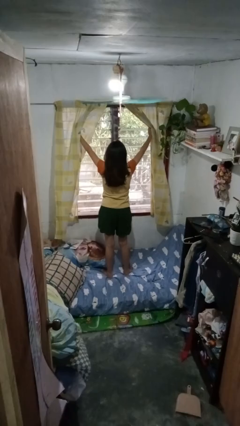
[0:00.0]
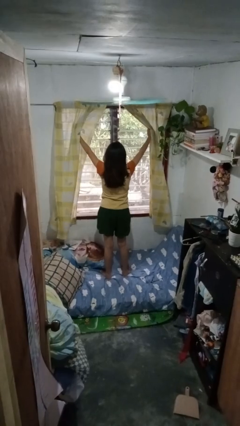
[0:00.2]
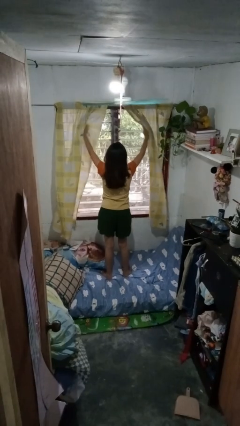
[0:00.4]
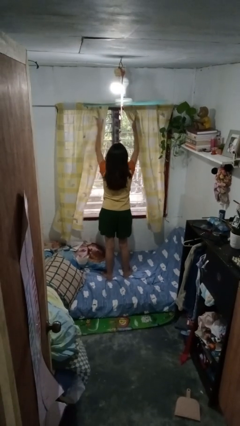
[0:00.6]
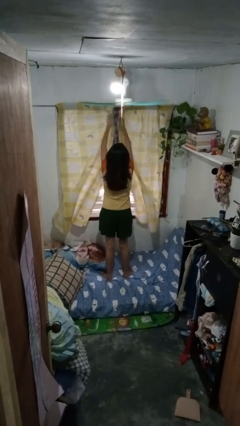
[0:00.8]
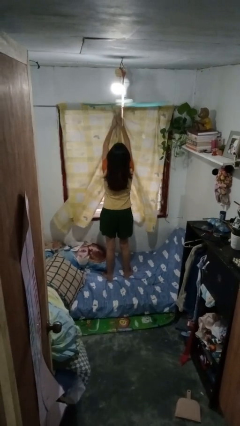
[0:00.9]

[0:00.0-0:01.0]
person closes curtains

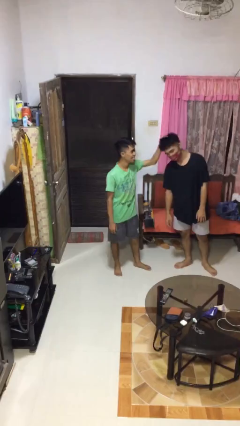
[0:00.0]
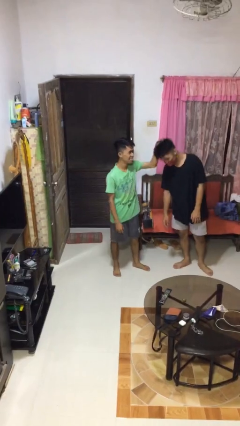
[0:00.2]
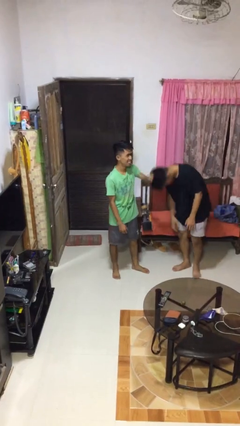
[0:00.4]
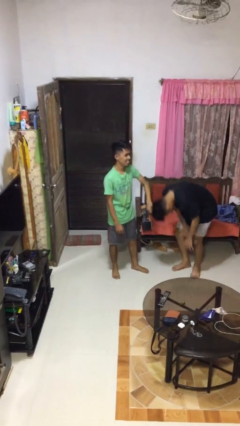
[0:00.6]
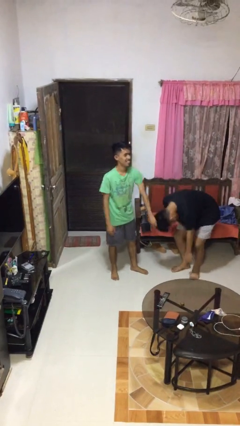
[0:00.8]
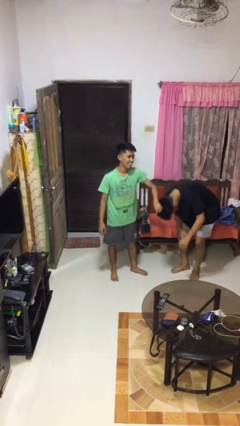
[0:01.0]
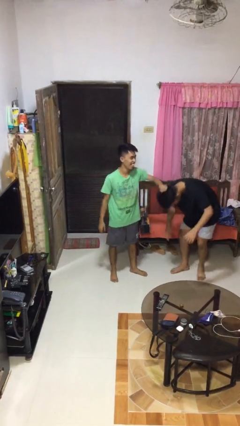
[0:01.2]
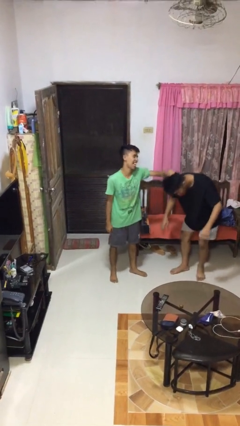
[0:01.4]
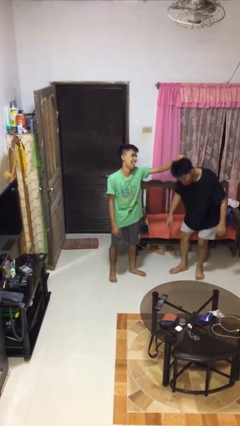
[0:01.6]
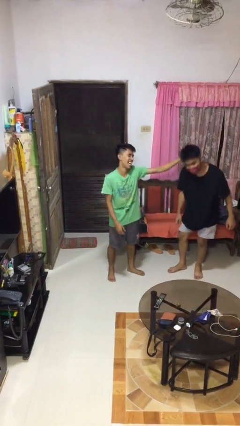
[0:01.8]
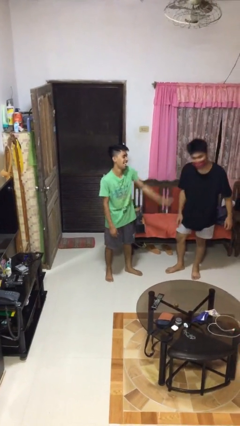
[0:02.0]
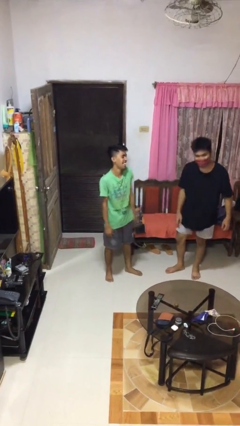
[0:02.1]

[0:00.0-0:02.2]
person grabs person by hair

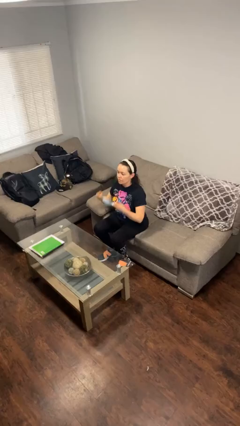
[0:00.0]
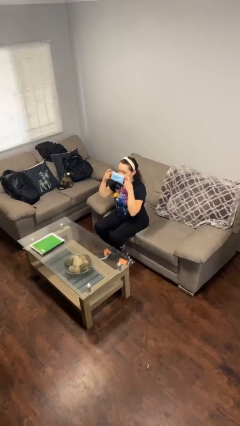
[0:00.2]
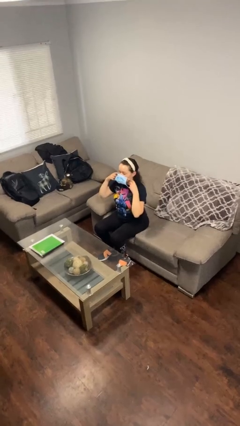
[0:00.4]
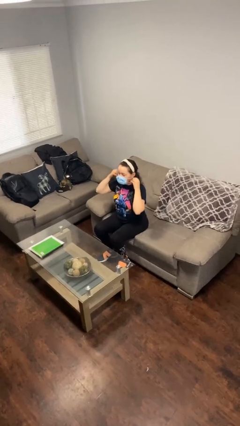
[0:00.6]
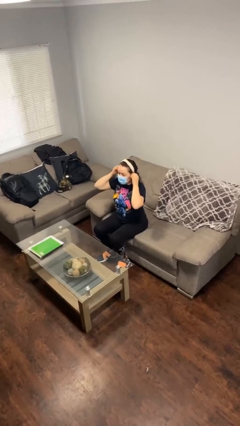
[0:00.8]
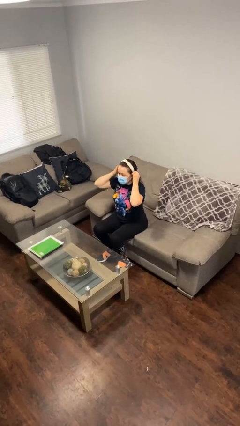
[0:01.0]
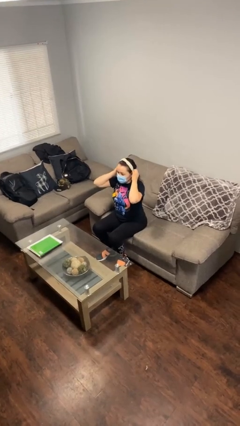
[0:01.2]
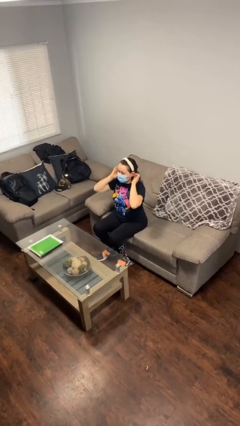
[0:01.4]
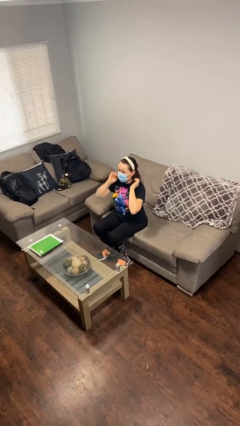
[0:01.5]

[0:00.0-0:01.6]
person puts on facemask

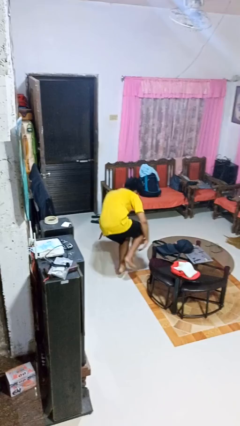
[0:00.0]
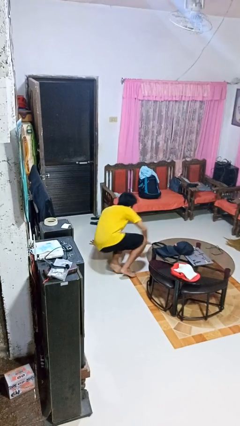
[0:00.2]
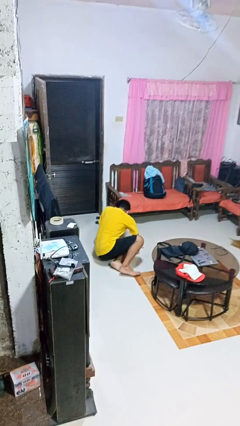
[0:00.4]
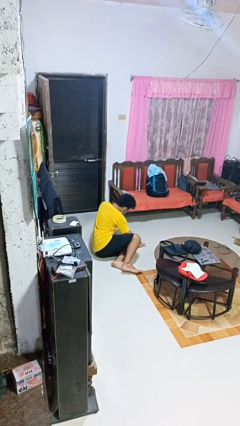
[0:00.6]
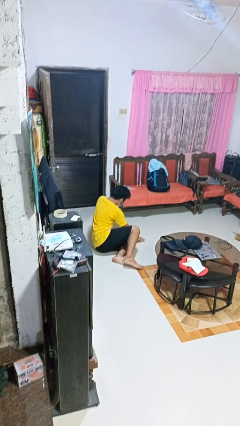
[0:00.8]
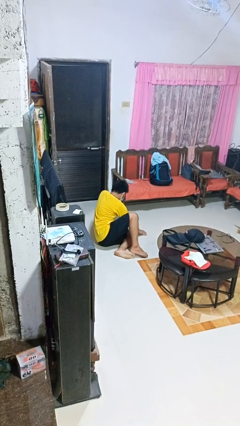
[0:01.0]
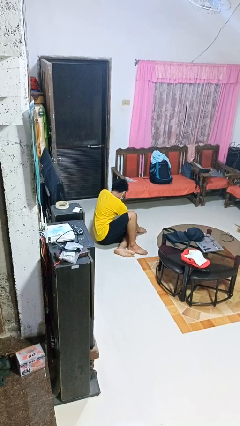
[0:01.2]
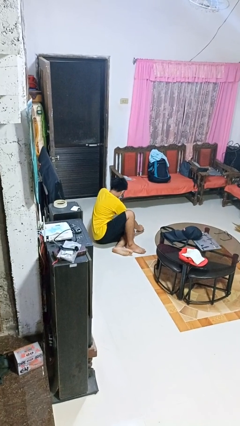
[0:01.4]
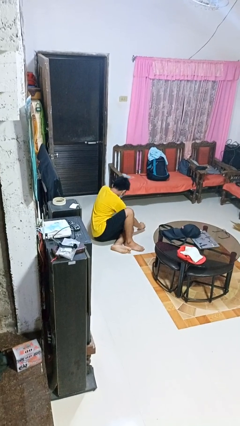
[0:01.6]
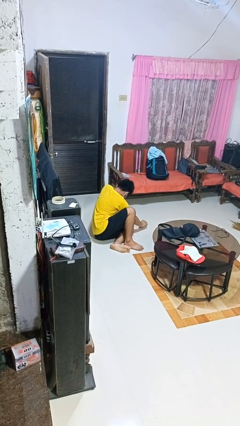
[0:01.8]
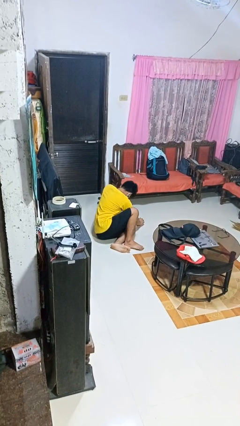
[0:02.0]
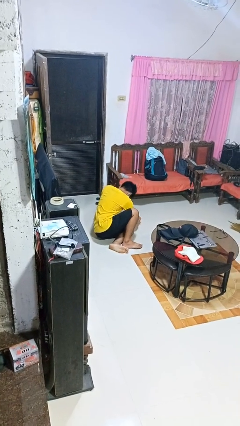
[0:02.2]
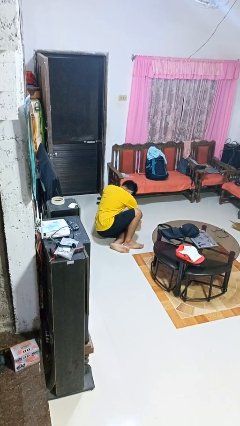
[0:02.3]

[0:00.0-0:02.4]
person lies down on floor

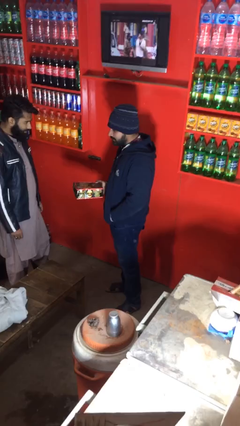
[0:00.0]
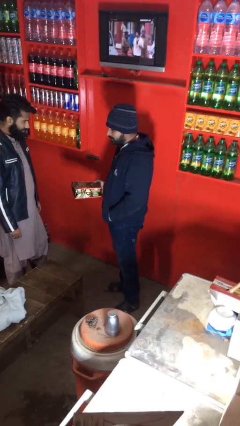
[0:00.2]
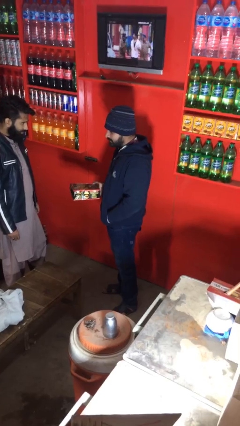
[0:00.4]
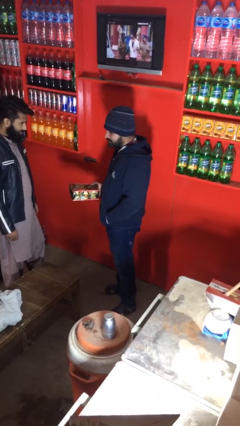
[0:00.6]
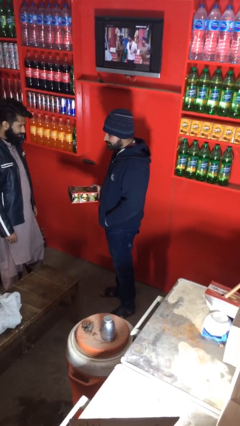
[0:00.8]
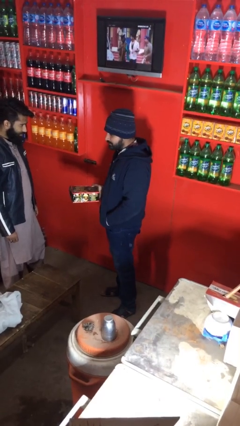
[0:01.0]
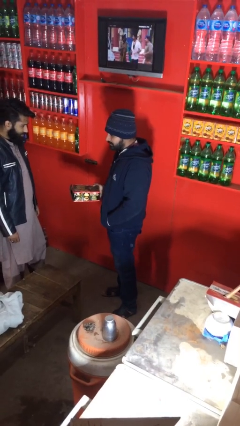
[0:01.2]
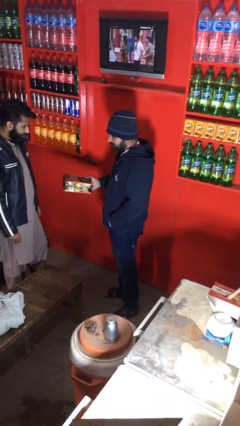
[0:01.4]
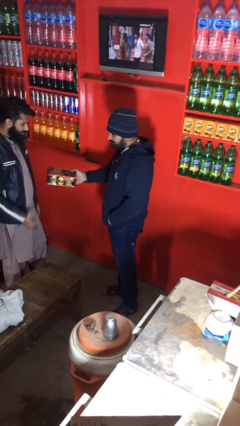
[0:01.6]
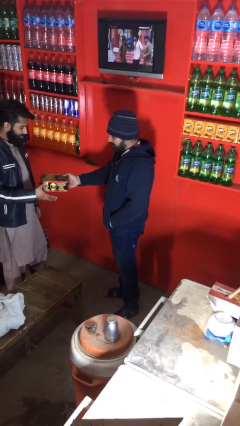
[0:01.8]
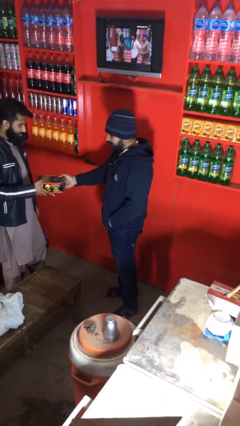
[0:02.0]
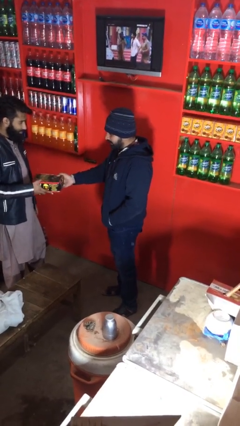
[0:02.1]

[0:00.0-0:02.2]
person transfers object to person

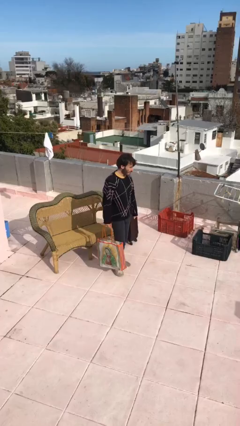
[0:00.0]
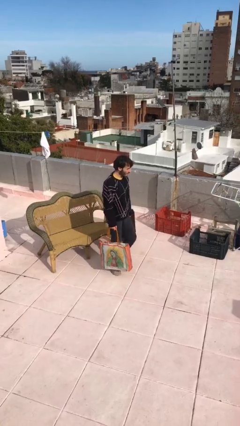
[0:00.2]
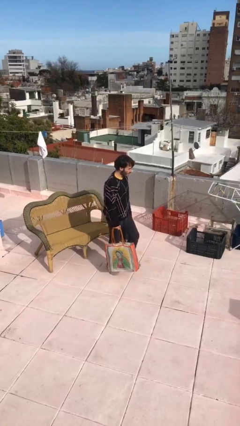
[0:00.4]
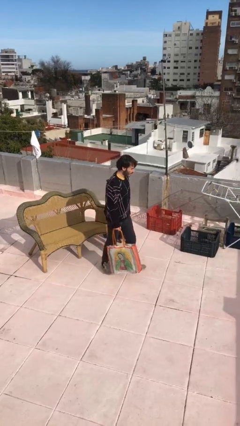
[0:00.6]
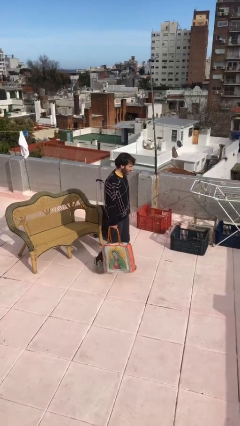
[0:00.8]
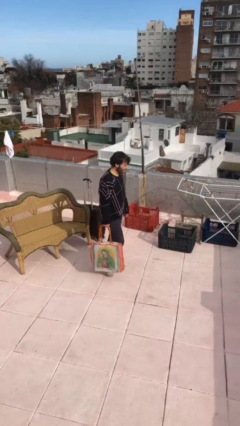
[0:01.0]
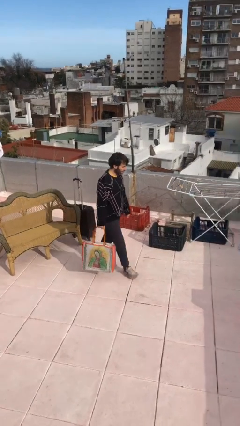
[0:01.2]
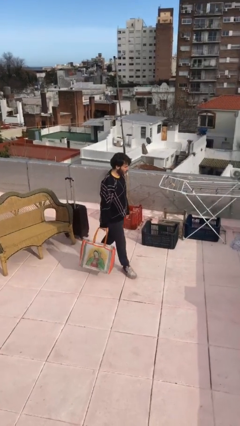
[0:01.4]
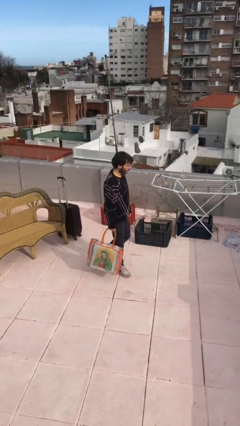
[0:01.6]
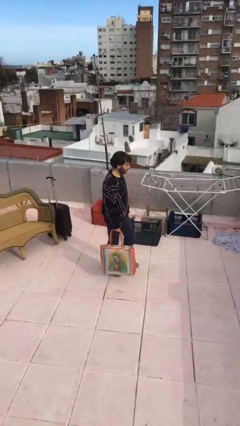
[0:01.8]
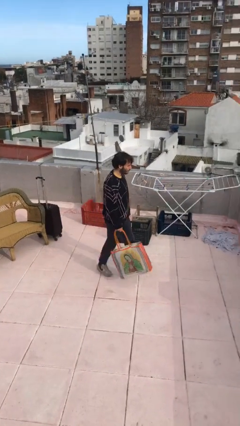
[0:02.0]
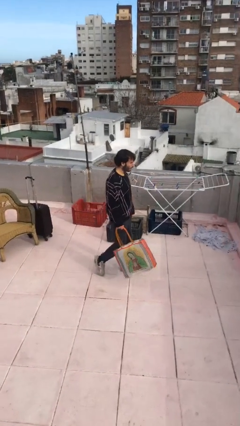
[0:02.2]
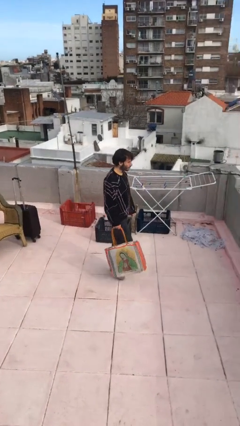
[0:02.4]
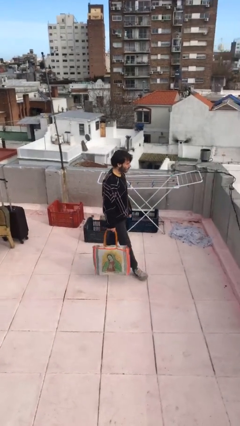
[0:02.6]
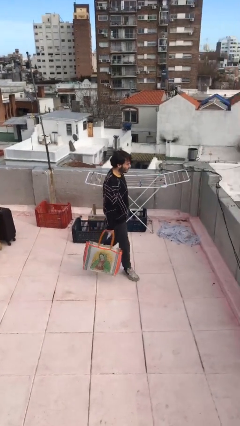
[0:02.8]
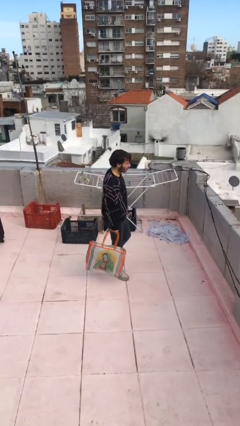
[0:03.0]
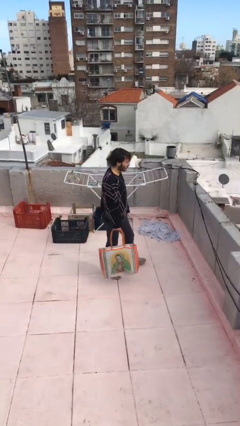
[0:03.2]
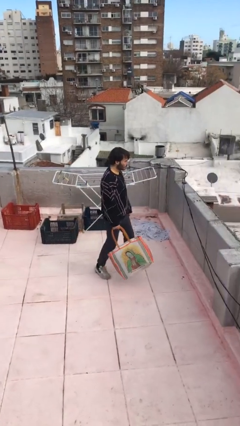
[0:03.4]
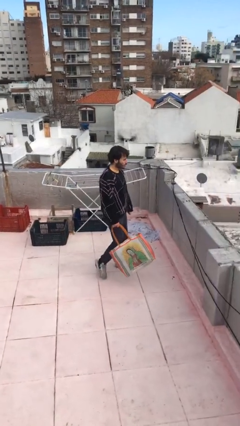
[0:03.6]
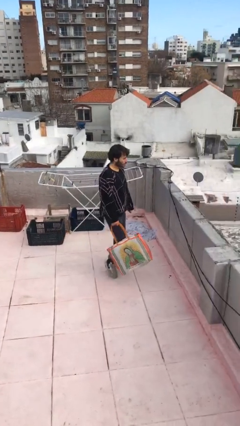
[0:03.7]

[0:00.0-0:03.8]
person carries groceries

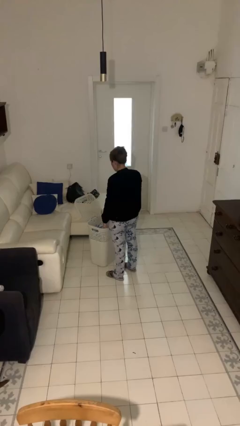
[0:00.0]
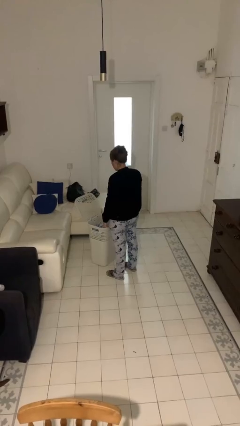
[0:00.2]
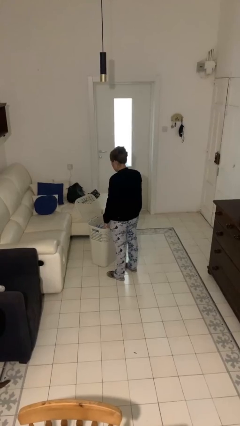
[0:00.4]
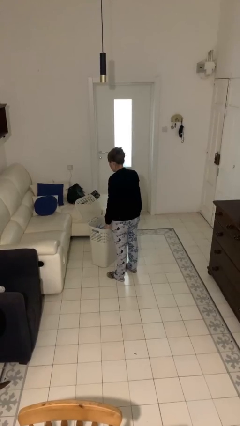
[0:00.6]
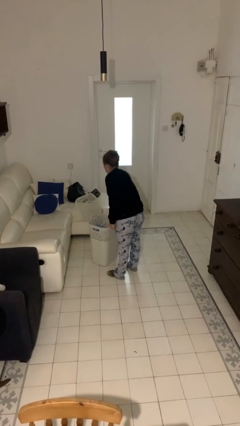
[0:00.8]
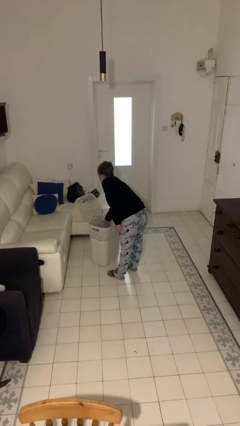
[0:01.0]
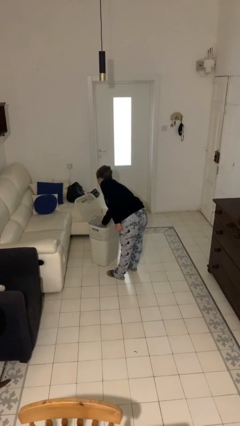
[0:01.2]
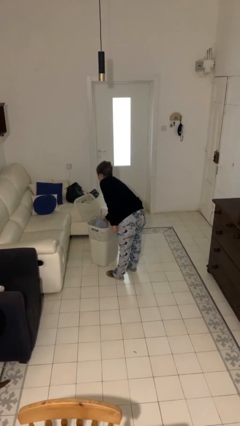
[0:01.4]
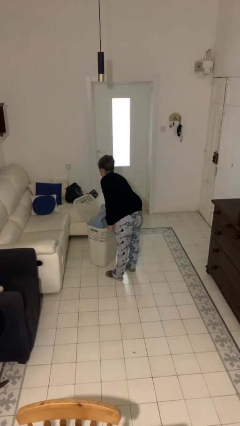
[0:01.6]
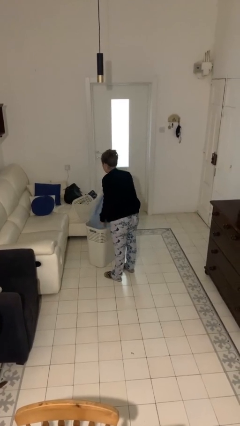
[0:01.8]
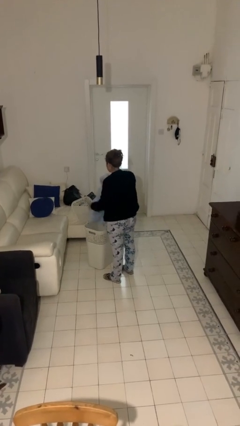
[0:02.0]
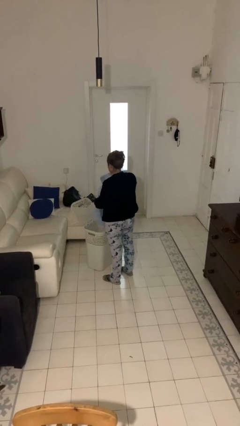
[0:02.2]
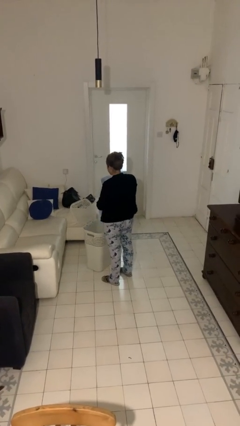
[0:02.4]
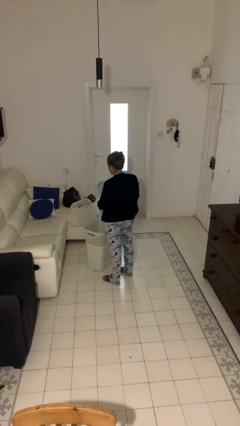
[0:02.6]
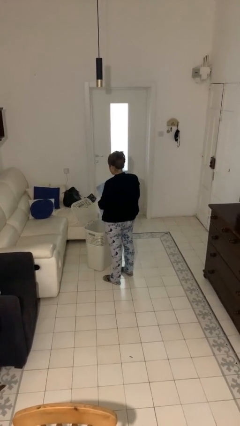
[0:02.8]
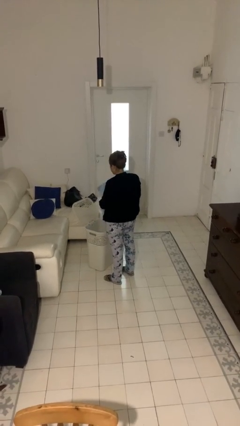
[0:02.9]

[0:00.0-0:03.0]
person takes object from basket

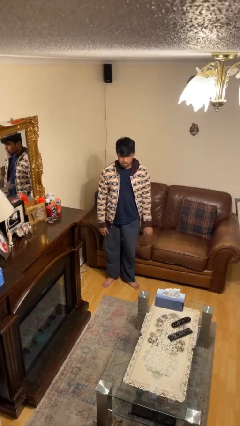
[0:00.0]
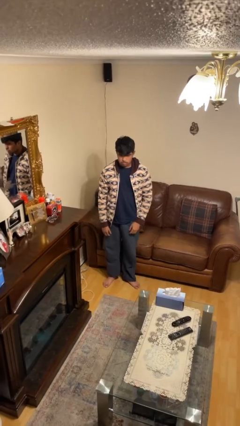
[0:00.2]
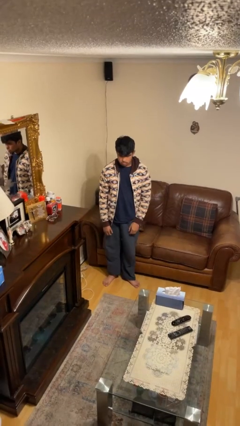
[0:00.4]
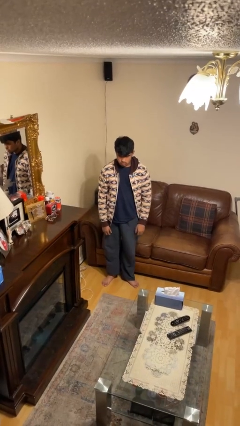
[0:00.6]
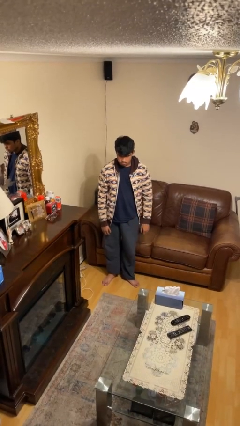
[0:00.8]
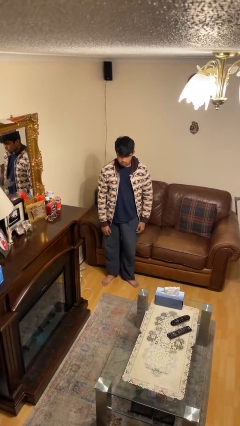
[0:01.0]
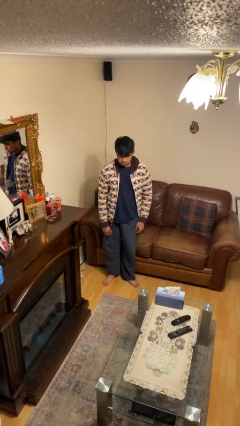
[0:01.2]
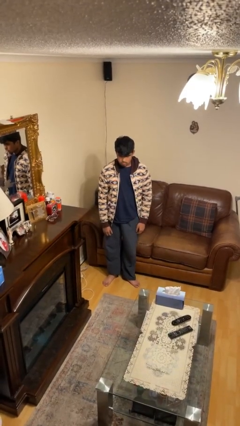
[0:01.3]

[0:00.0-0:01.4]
person puts phone into pocket
